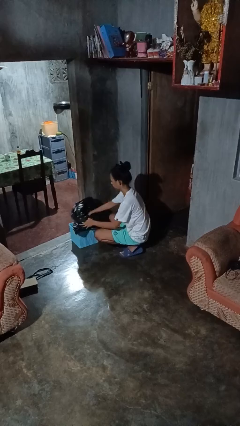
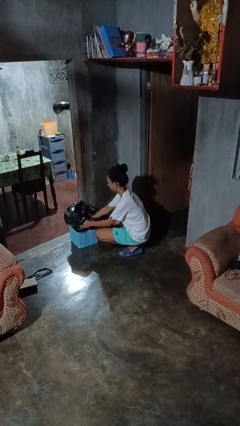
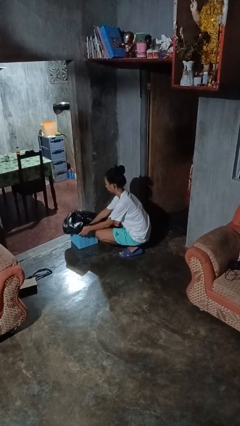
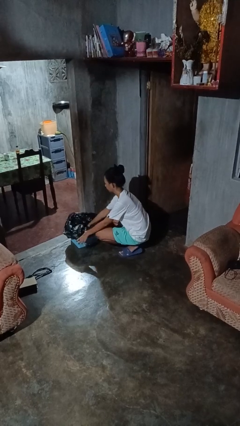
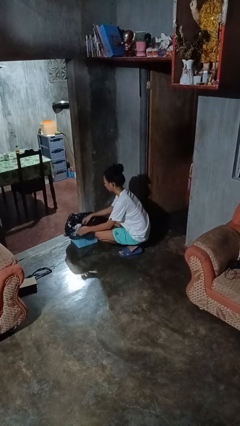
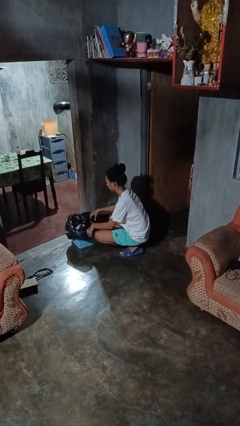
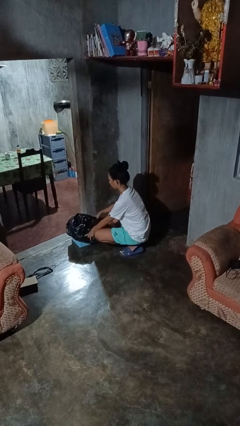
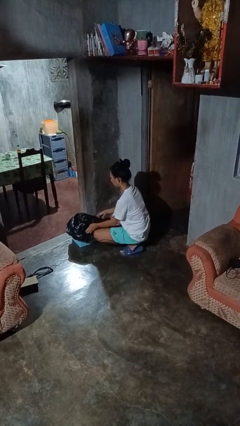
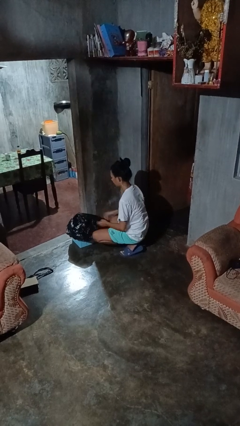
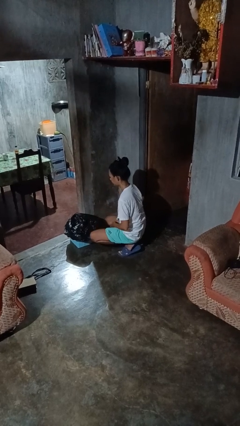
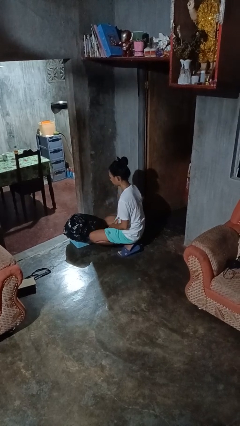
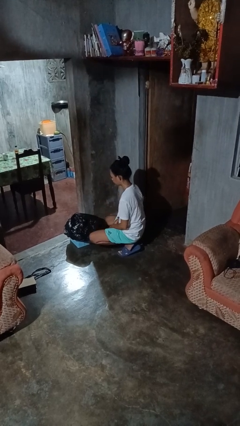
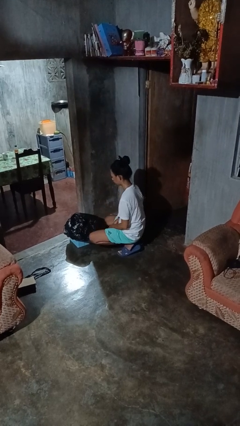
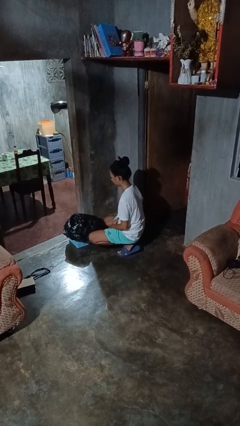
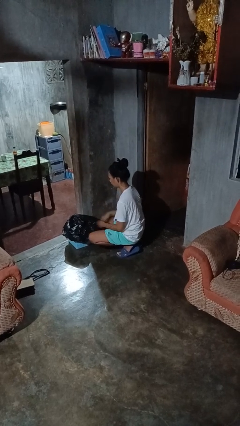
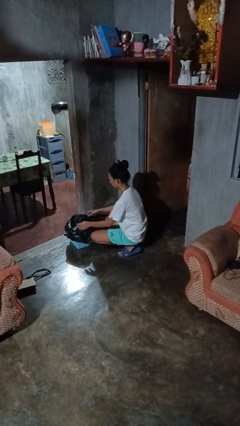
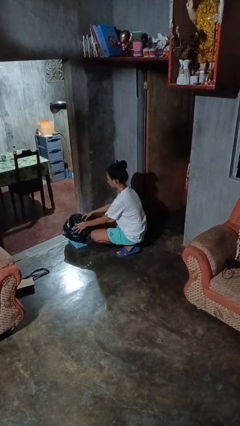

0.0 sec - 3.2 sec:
person inserts trashbag into trashcan

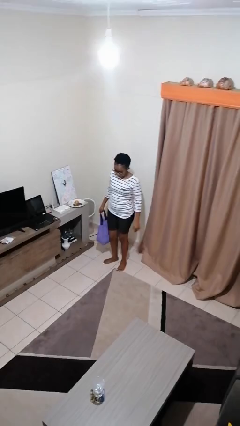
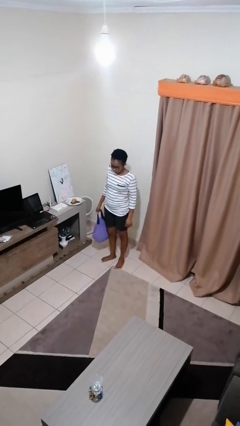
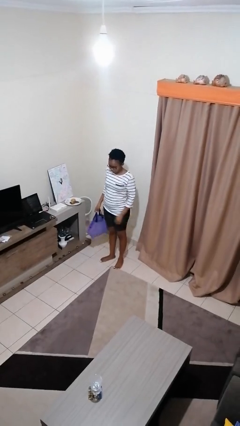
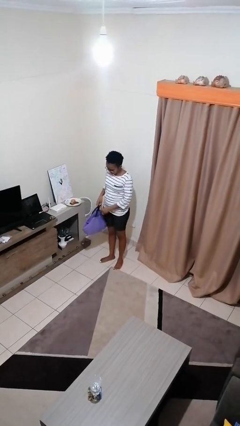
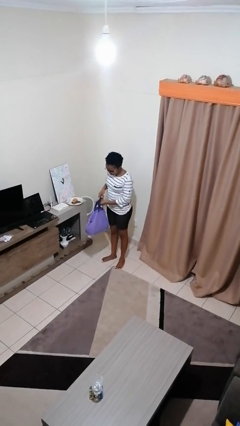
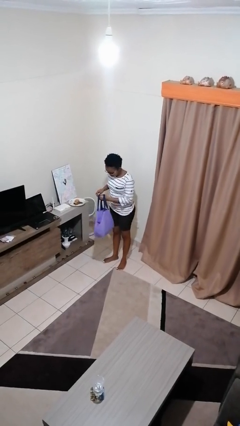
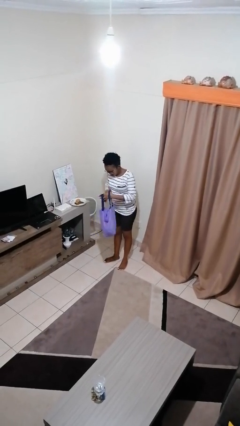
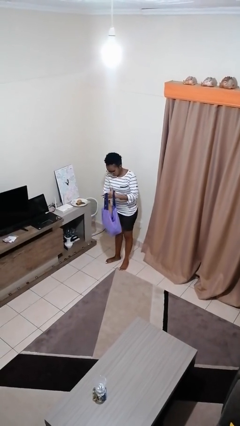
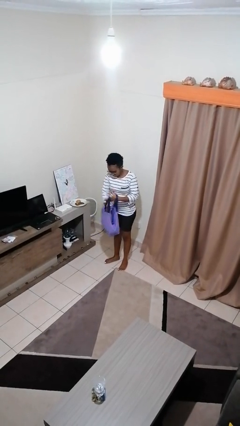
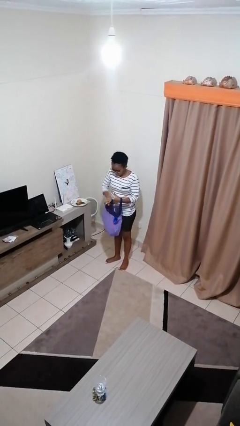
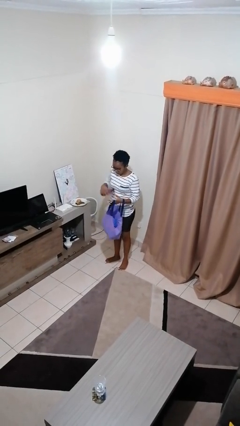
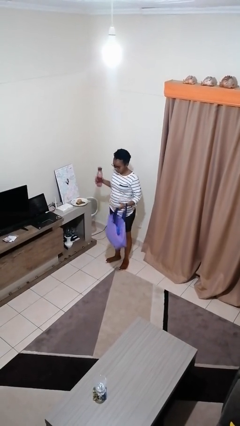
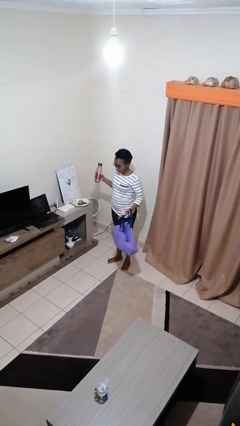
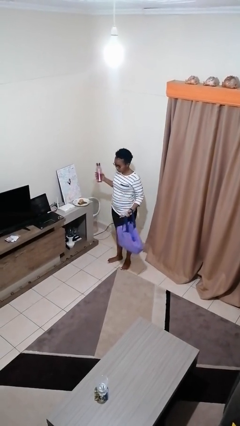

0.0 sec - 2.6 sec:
person takes object from bag

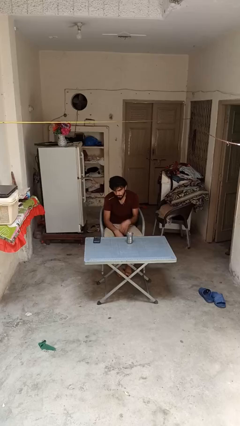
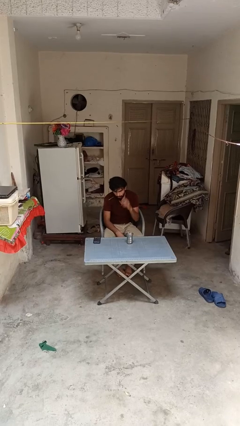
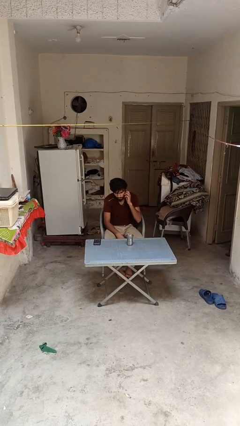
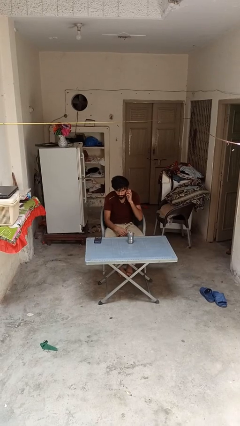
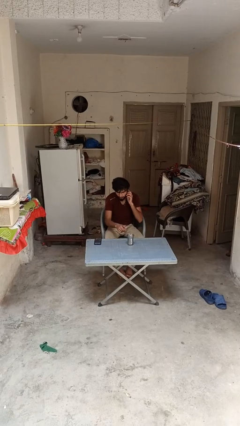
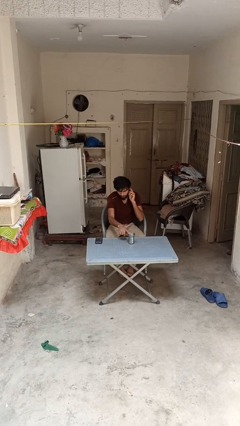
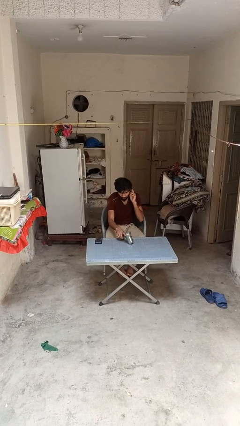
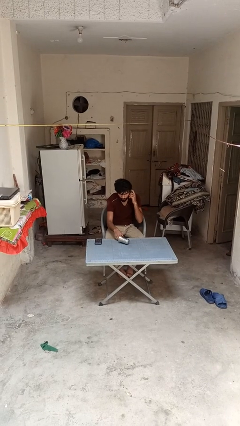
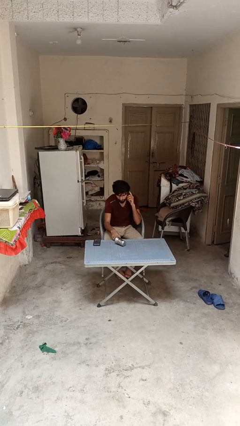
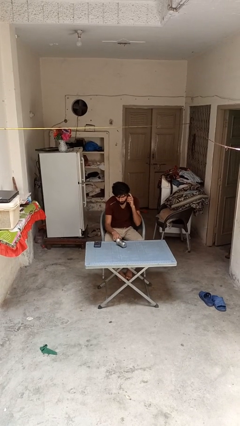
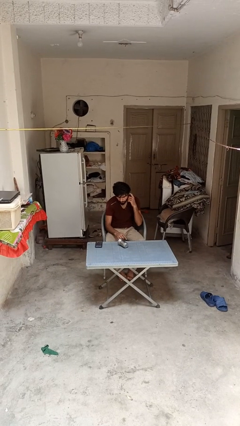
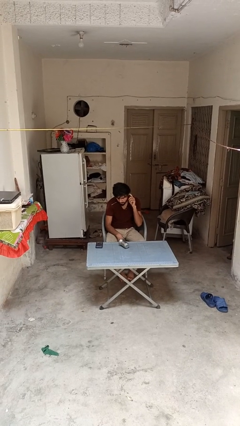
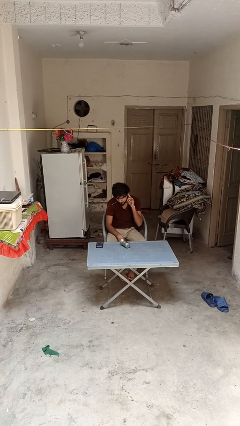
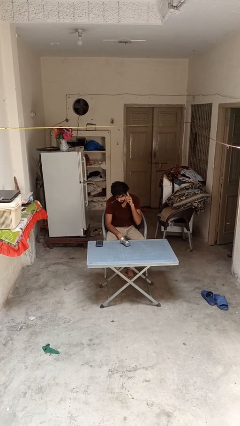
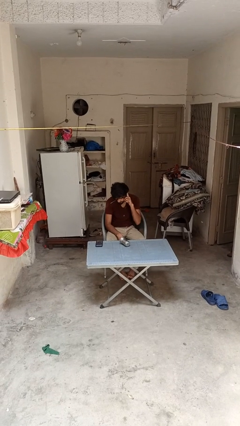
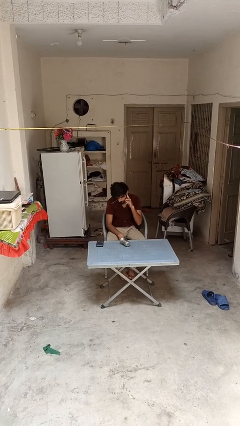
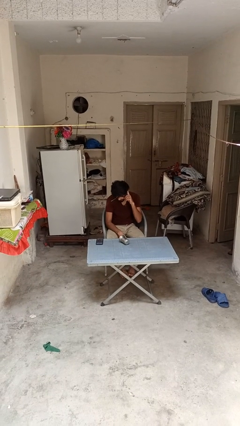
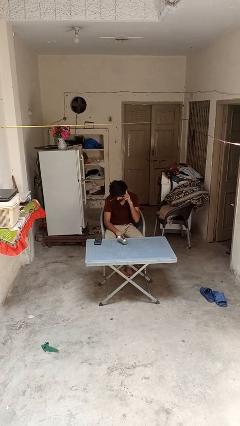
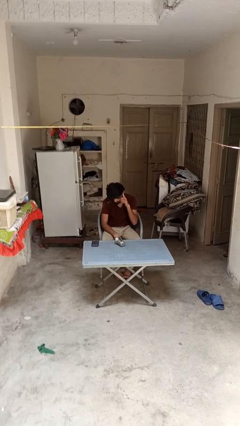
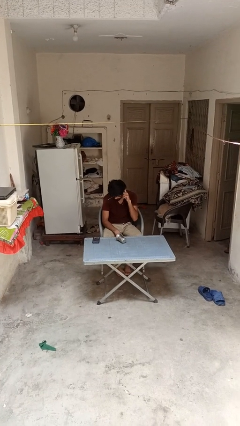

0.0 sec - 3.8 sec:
person knocks over glass

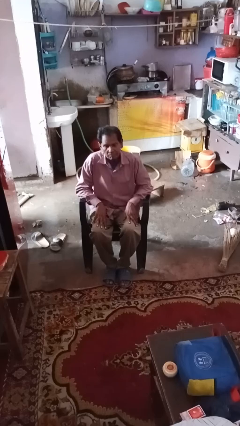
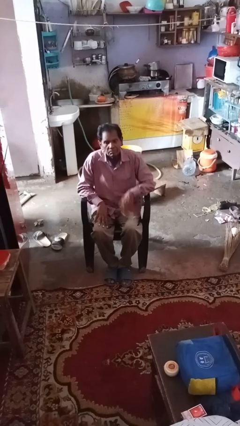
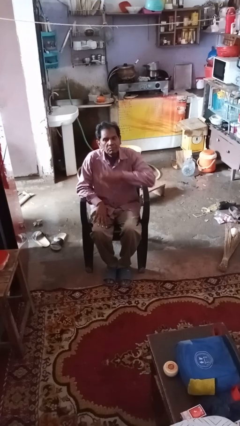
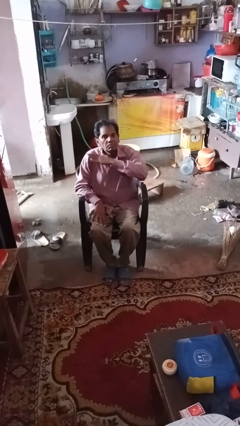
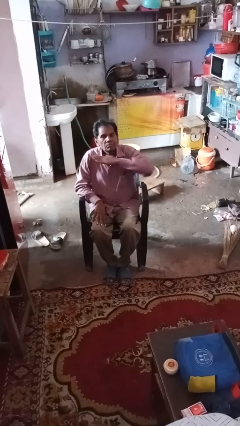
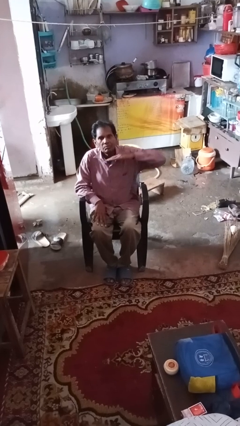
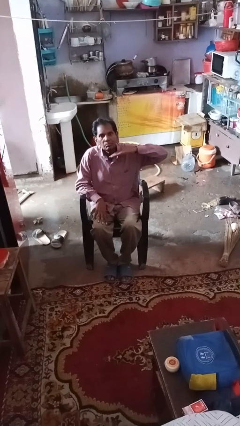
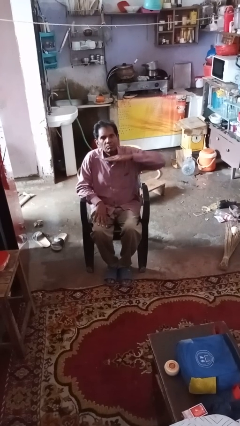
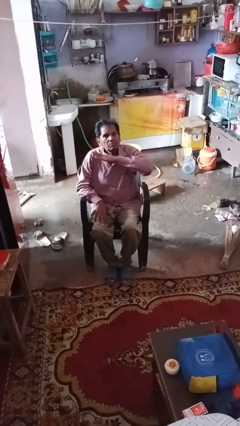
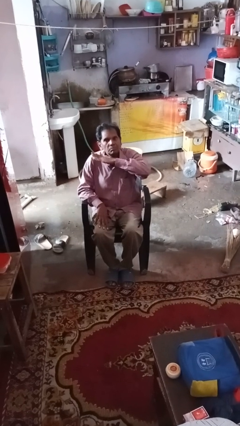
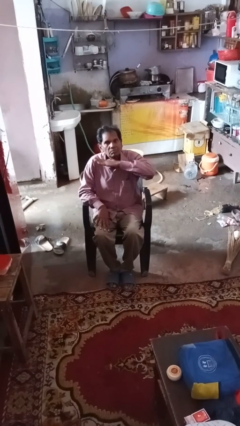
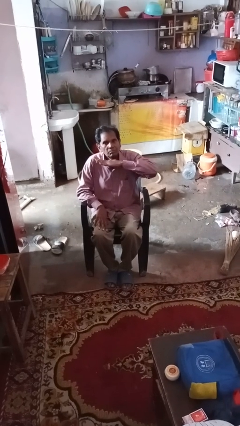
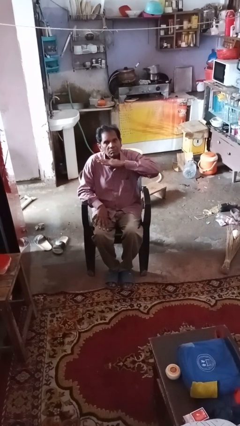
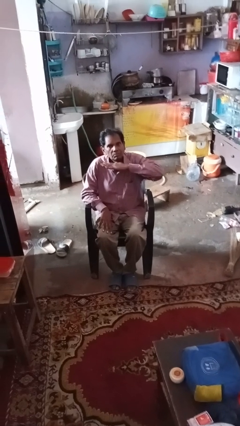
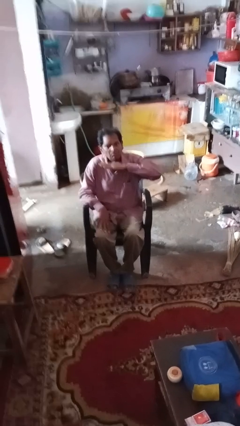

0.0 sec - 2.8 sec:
person gestures cut

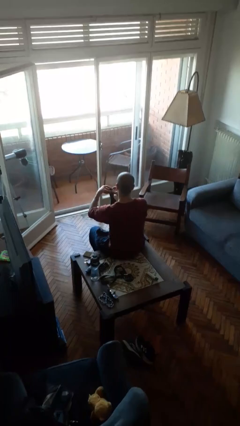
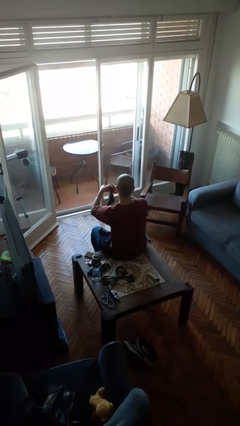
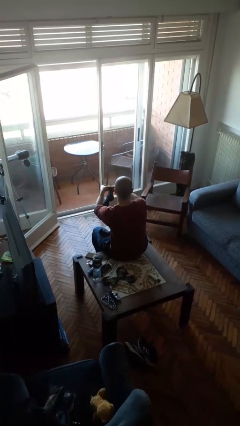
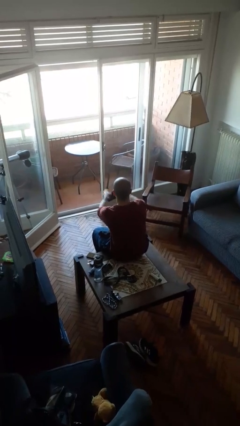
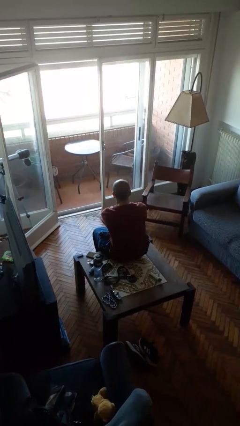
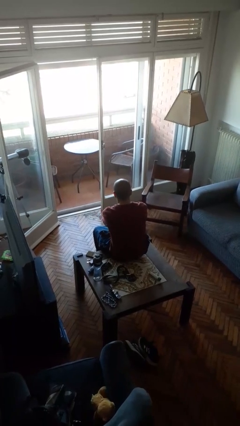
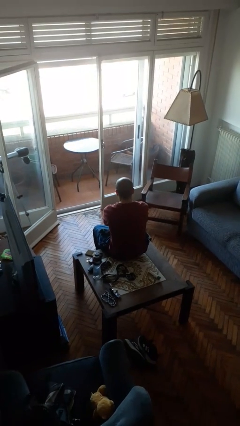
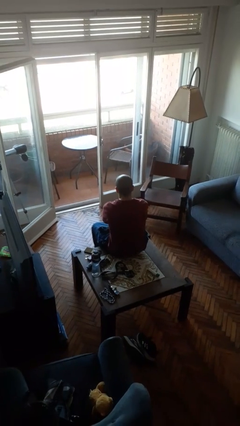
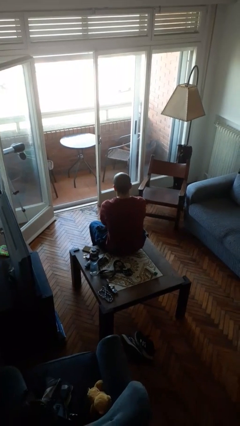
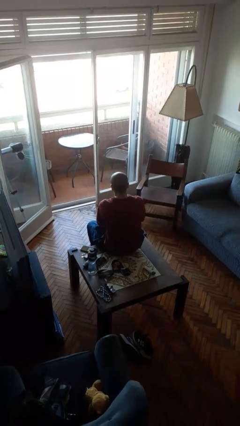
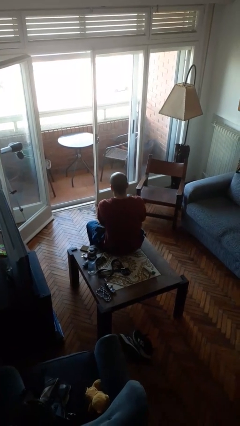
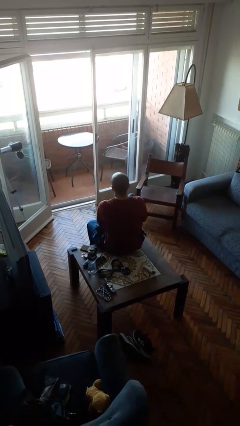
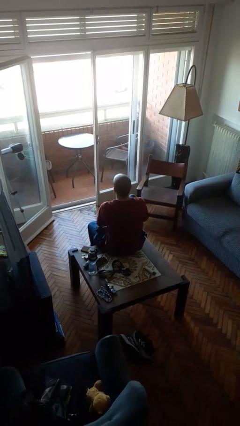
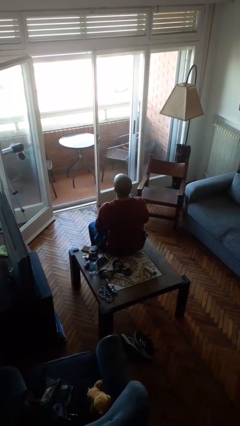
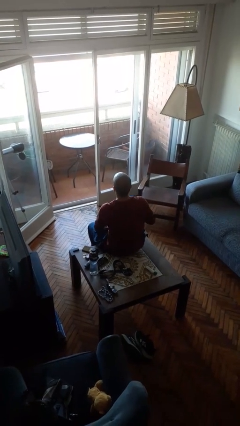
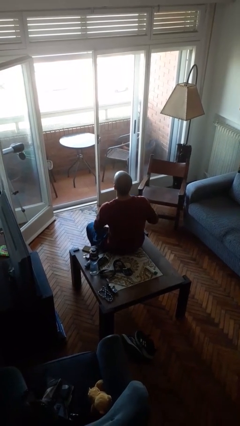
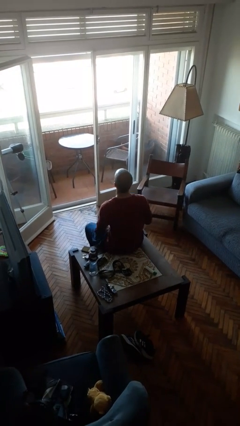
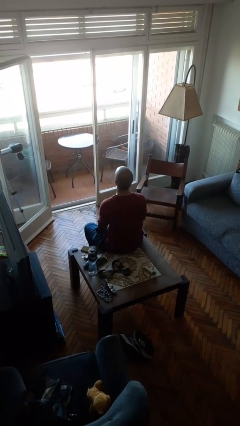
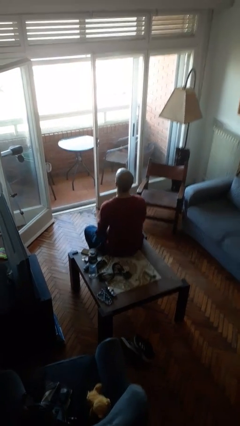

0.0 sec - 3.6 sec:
person puts on socks

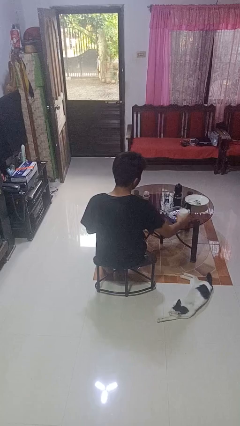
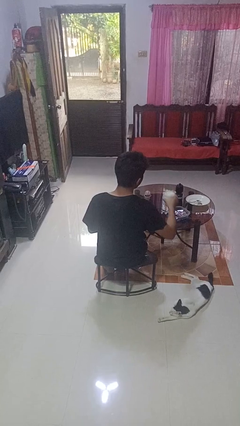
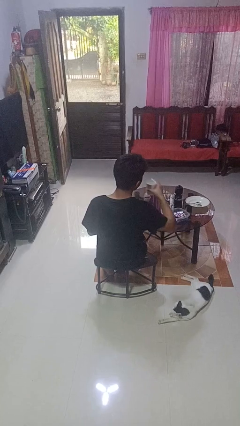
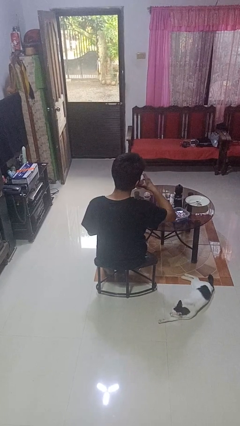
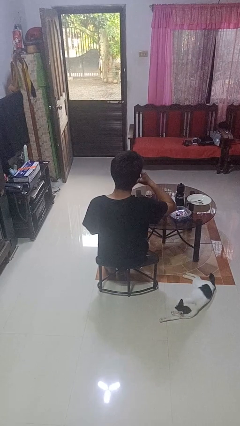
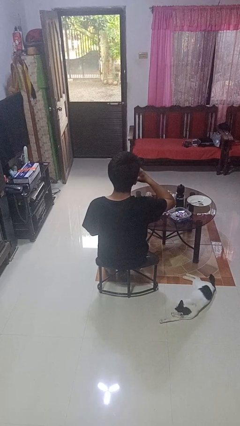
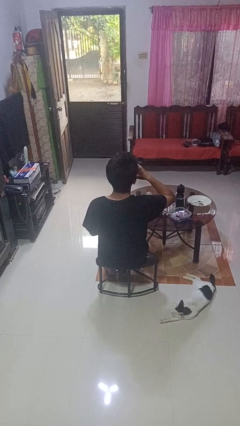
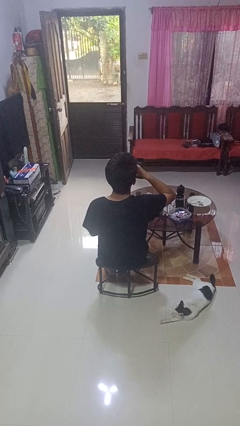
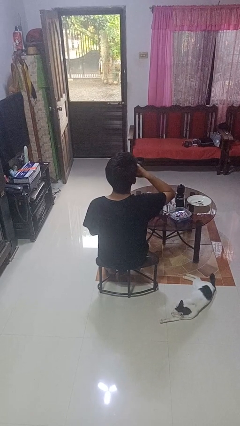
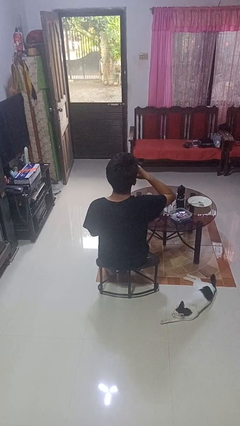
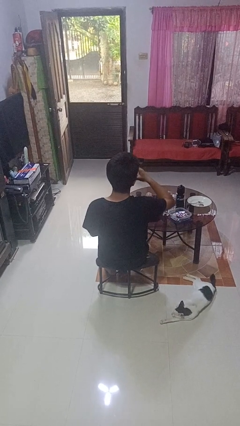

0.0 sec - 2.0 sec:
person drinks from cup
